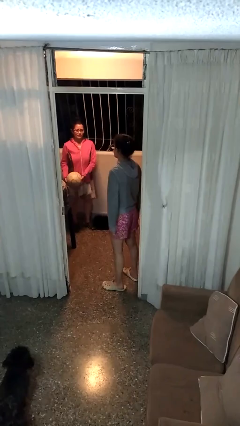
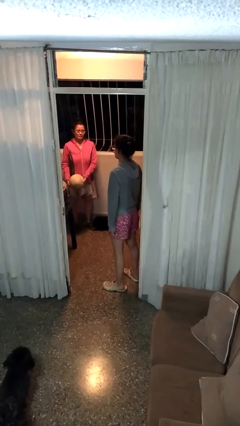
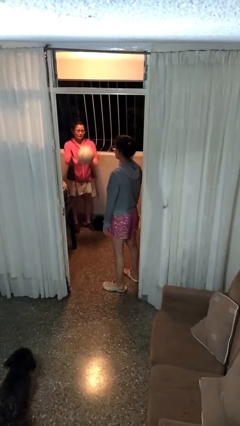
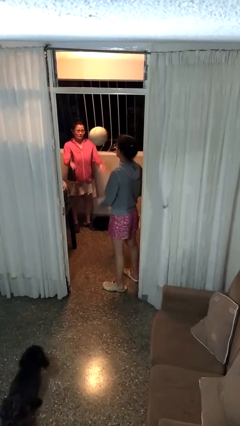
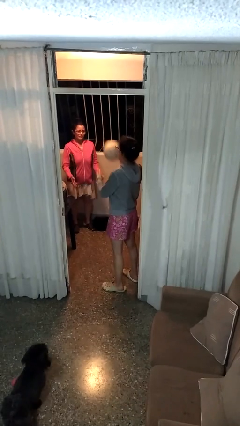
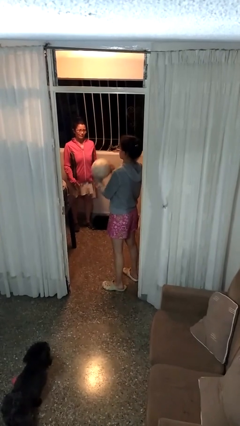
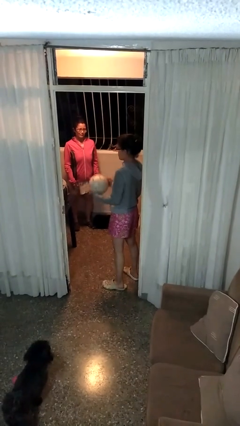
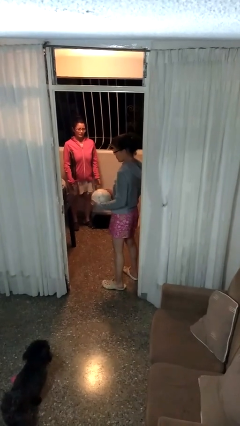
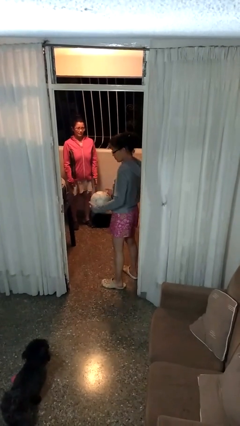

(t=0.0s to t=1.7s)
person catches object from person

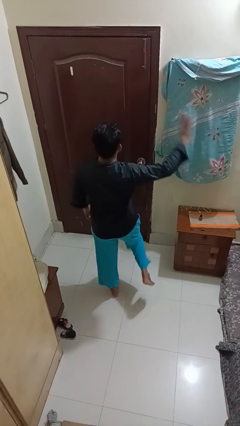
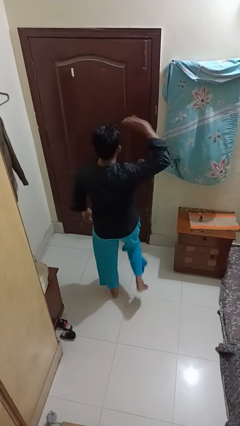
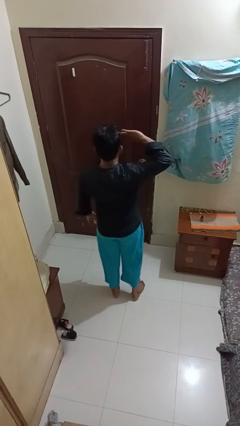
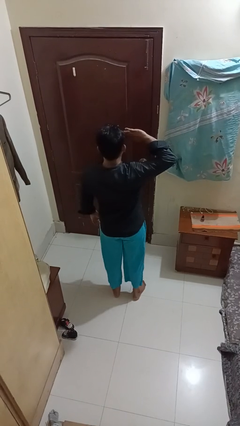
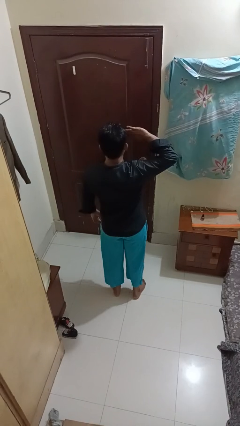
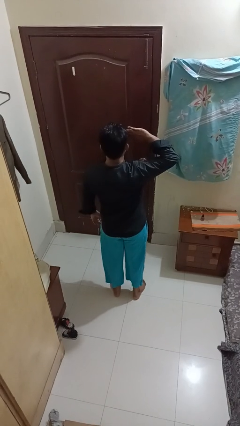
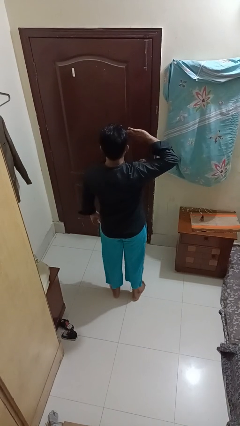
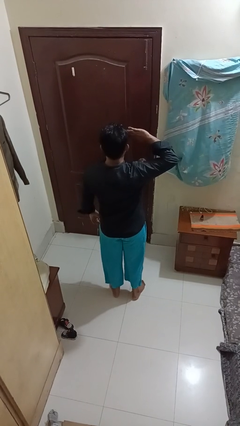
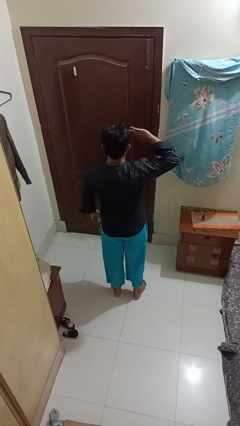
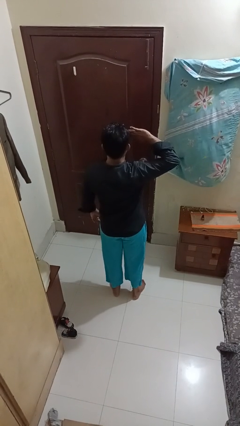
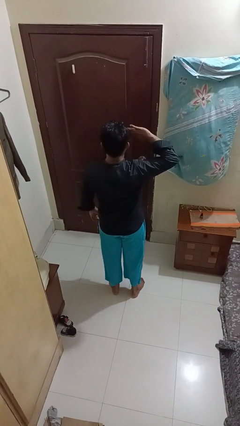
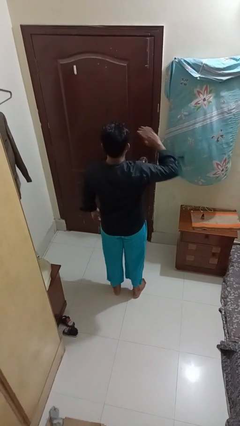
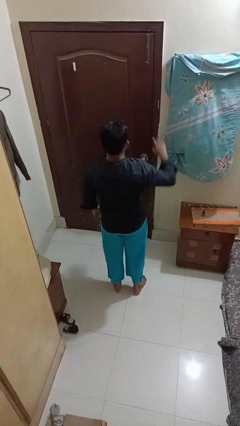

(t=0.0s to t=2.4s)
person salutes

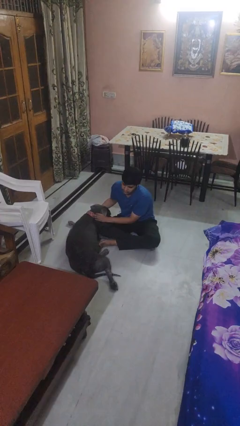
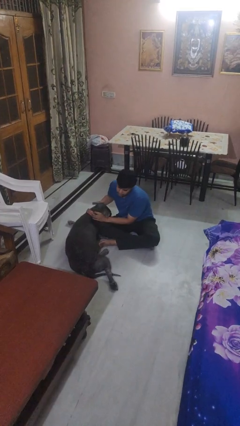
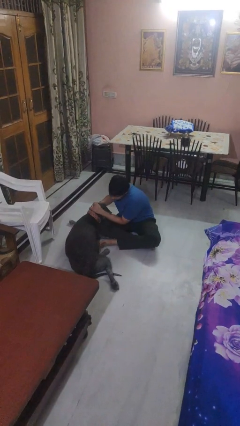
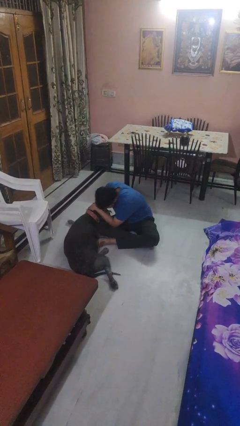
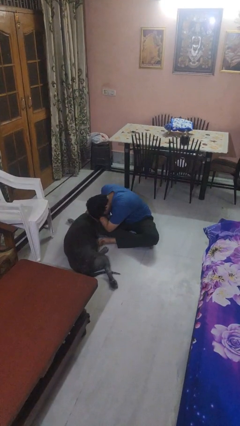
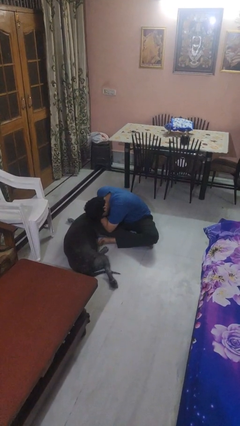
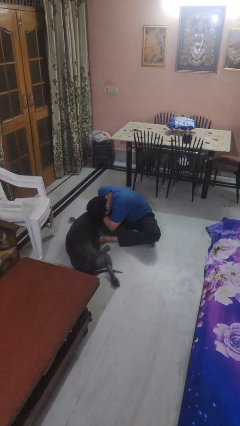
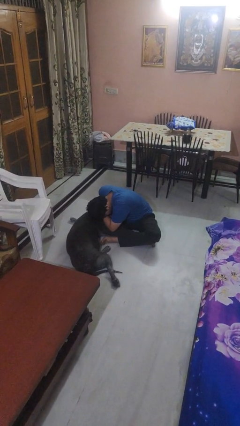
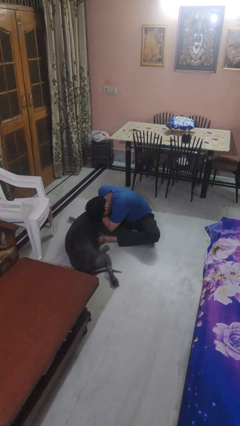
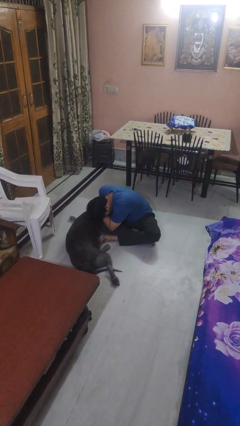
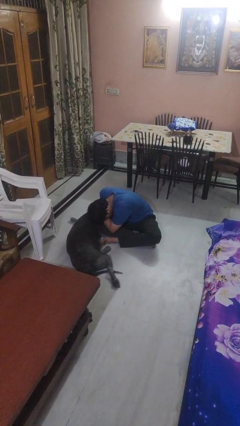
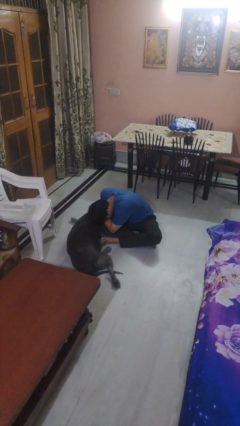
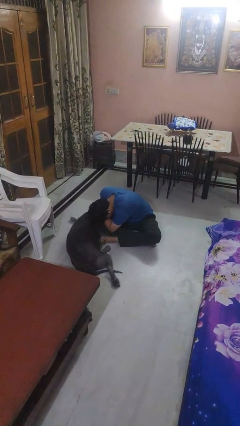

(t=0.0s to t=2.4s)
person hugs dog

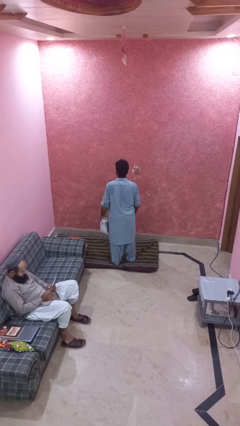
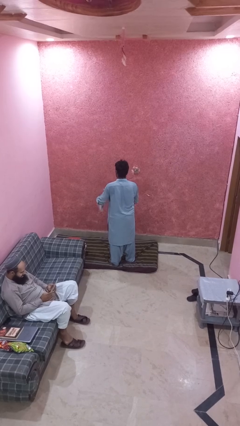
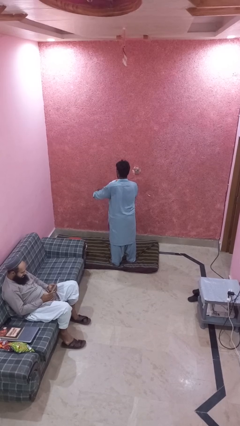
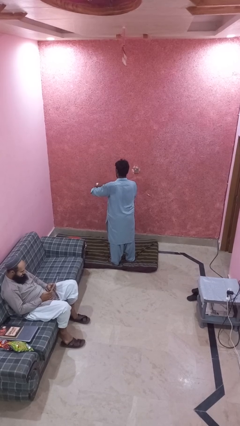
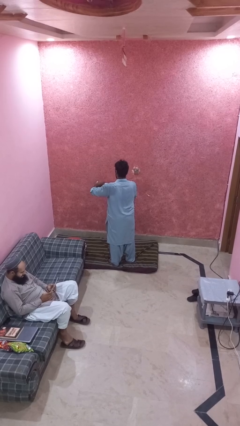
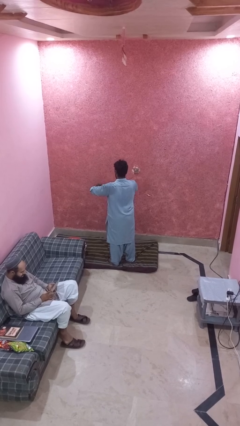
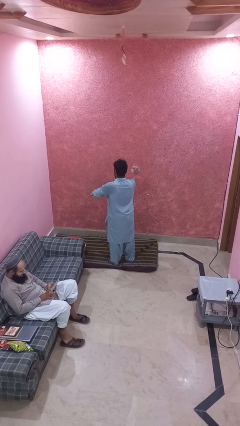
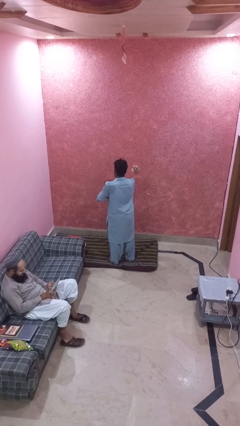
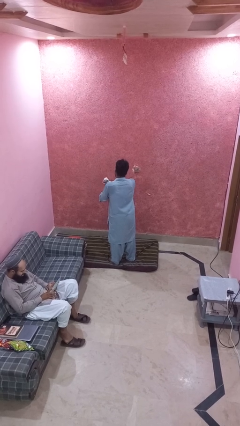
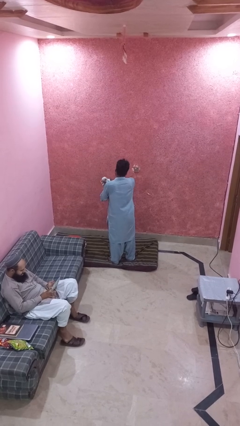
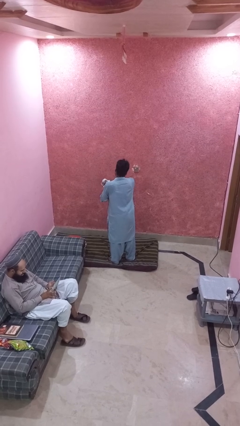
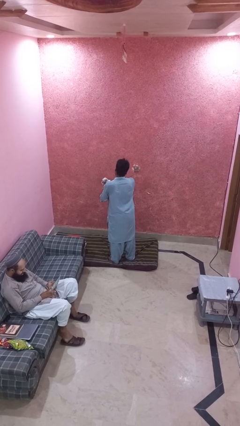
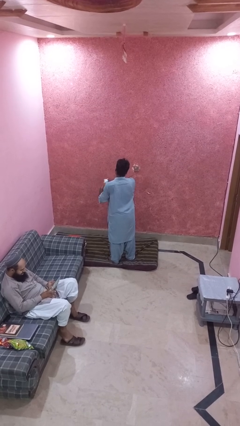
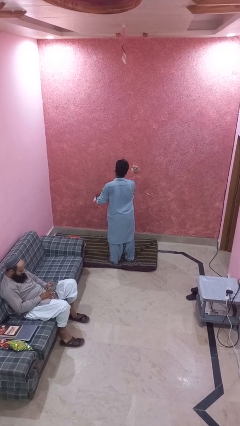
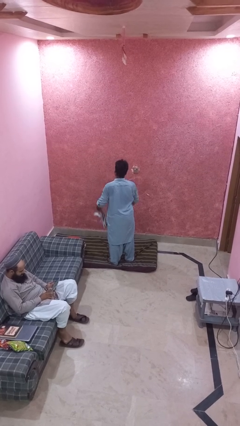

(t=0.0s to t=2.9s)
person squeezes object

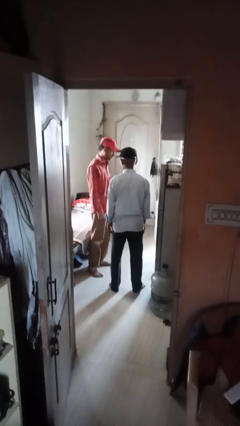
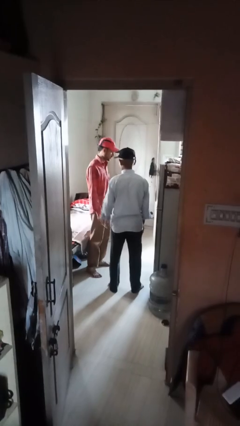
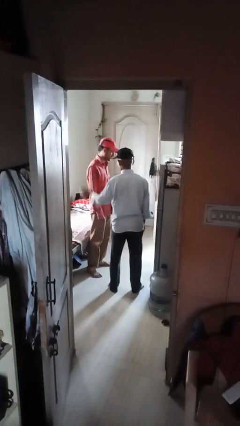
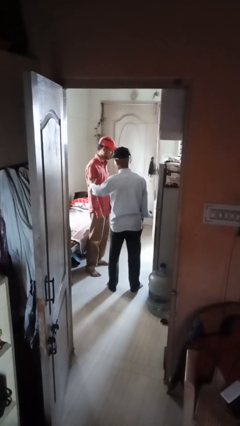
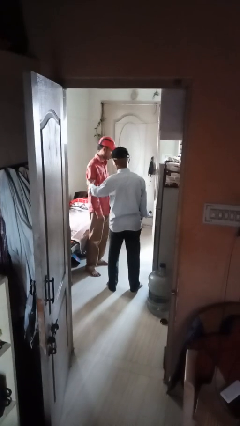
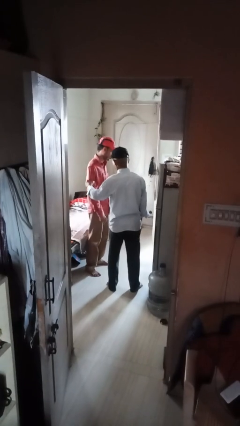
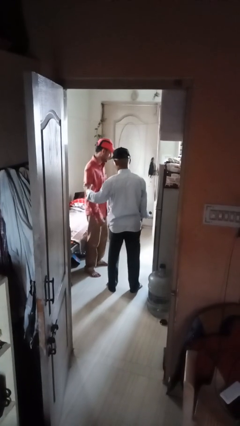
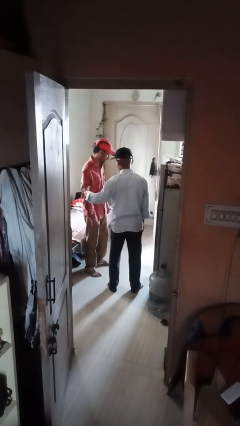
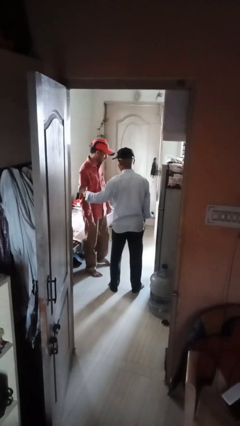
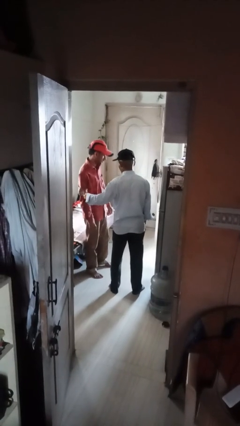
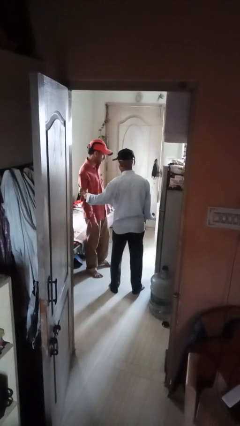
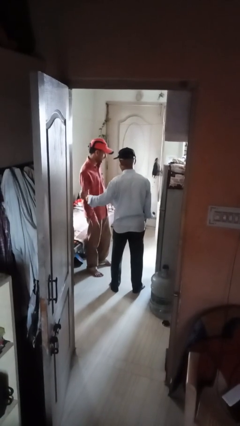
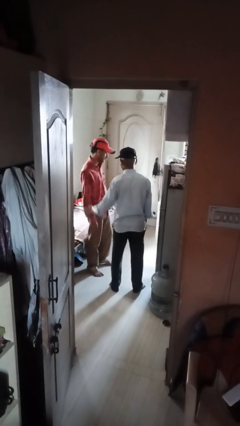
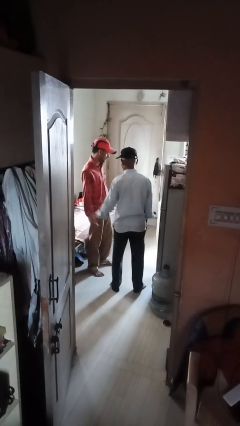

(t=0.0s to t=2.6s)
person grabs person by bicep

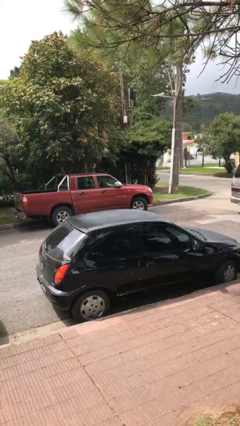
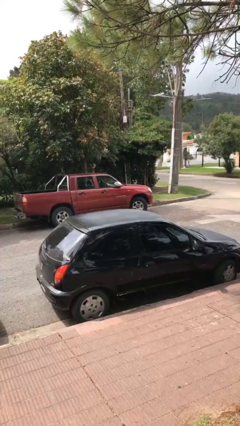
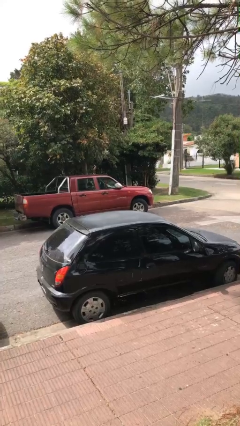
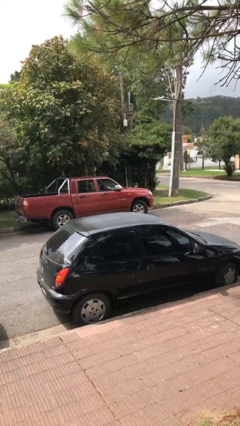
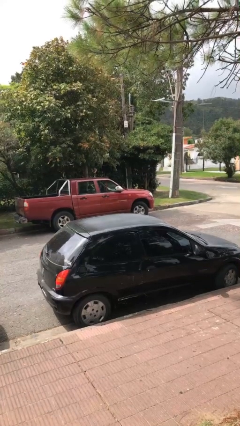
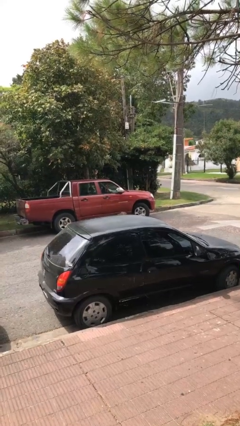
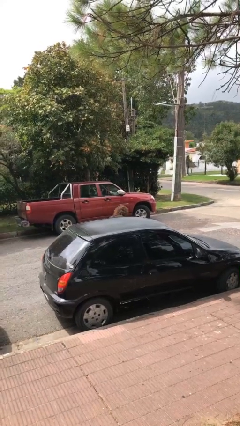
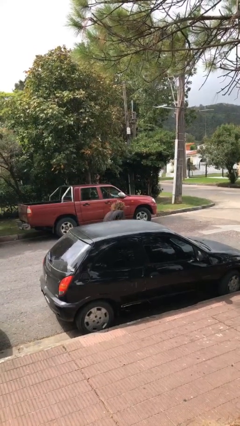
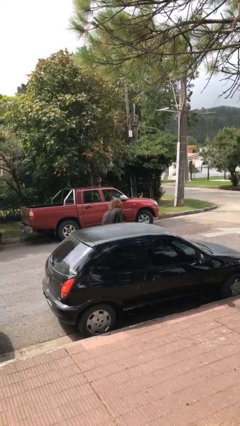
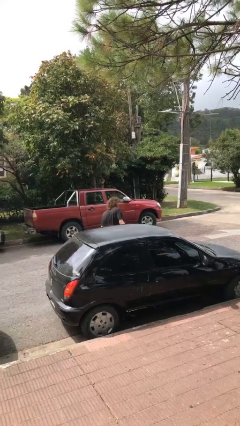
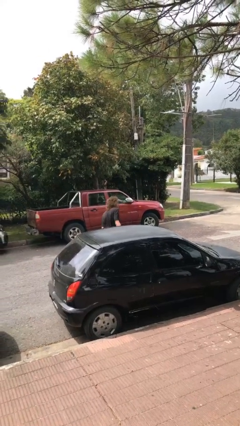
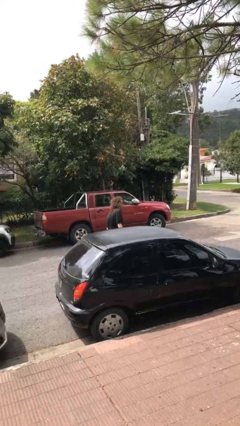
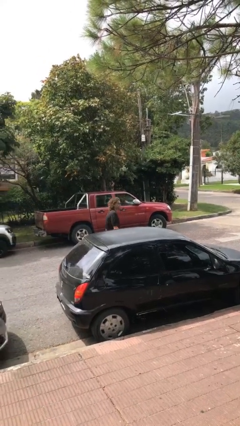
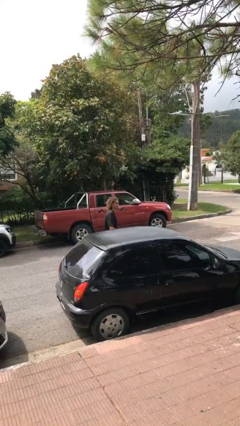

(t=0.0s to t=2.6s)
person exits car

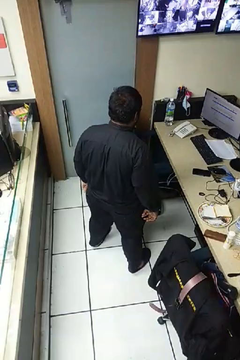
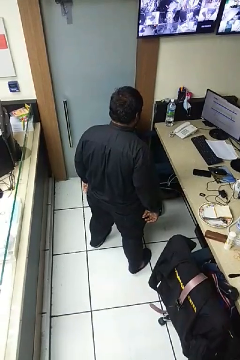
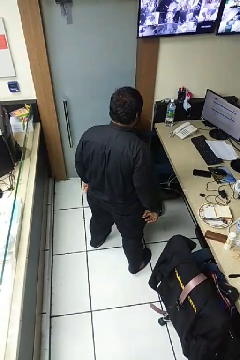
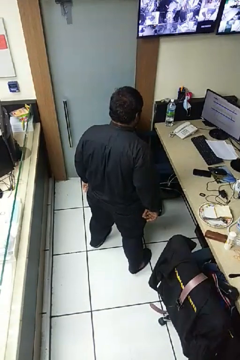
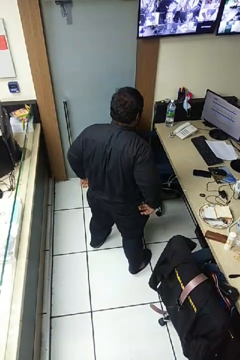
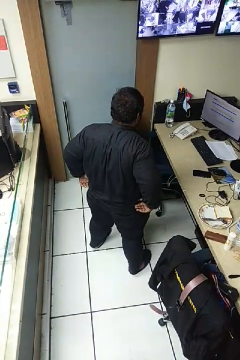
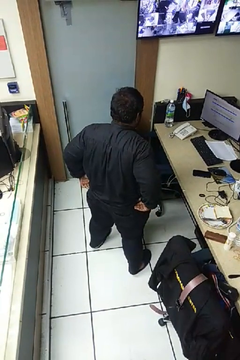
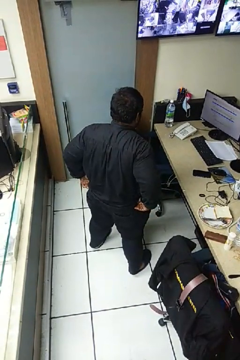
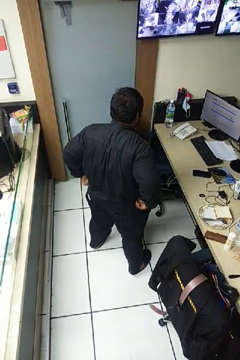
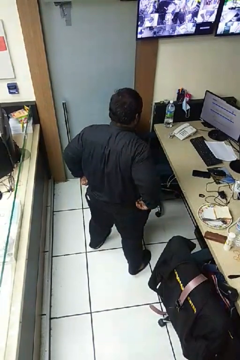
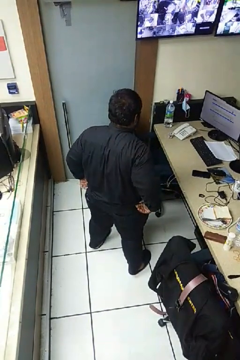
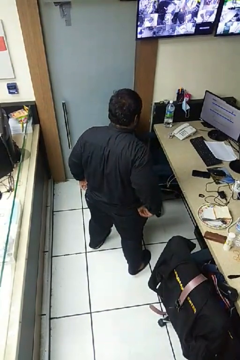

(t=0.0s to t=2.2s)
person hikes up pants

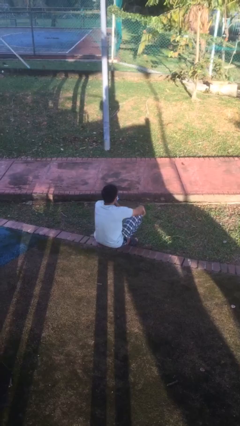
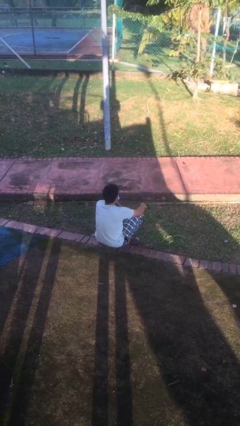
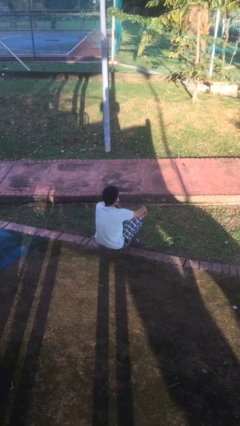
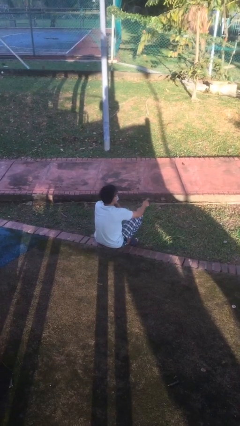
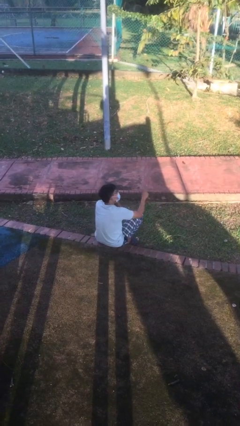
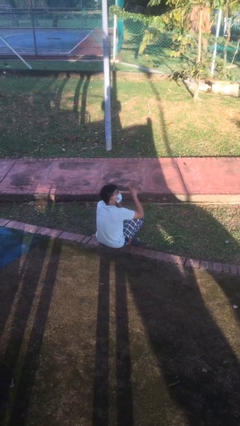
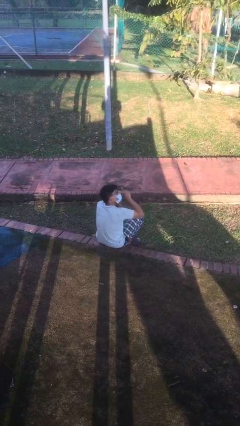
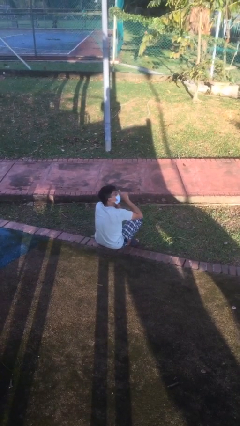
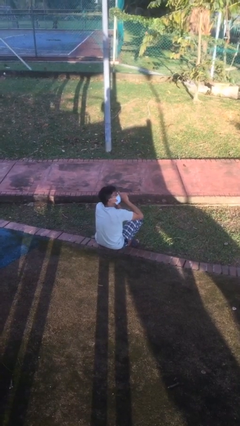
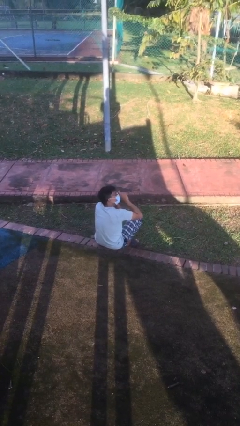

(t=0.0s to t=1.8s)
person gestures be quiet
